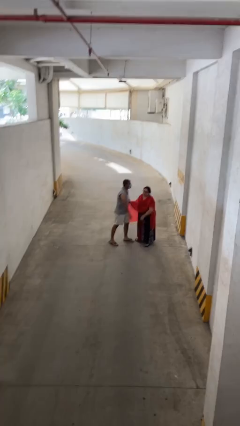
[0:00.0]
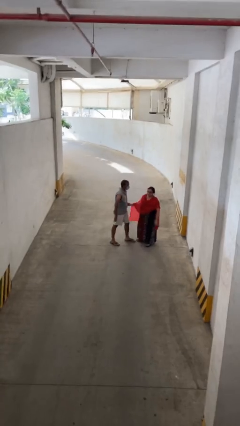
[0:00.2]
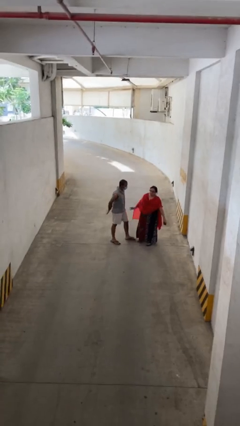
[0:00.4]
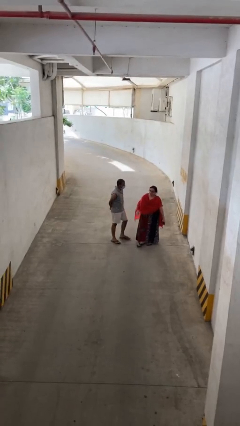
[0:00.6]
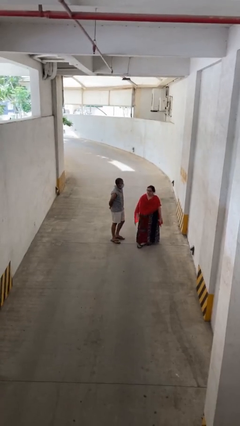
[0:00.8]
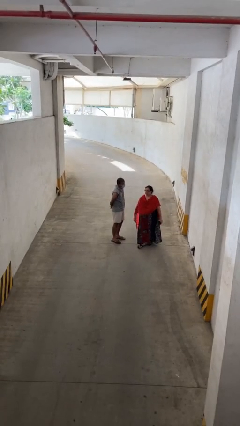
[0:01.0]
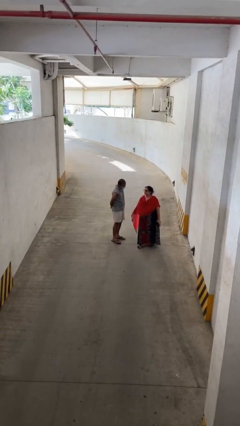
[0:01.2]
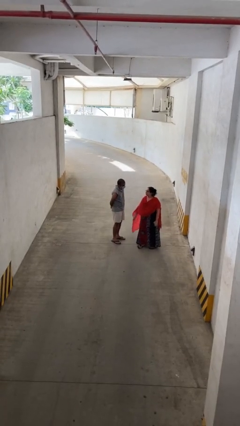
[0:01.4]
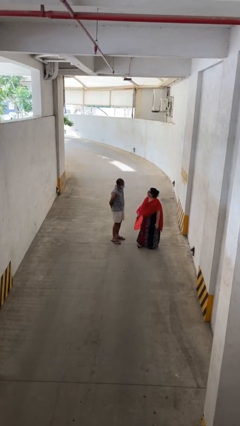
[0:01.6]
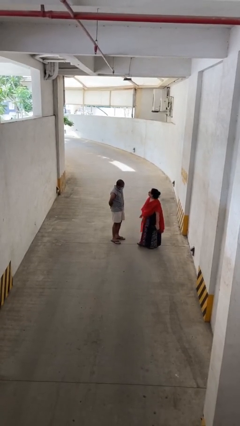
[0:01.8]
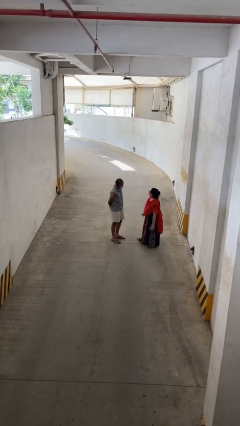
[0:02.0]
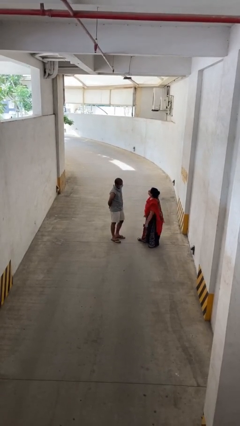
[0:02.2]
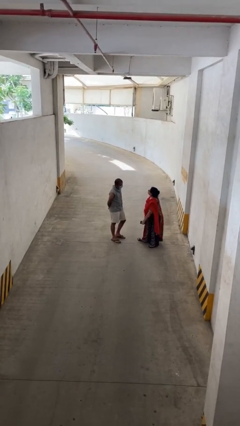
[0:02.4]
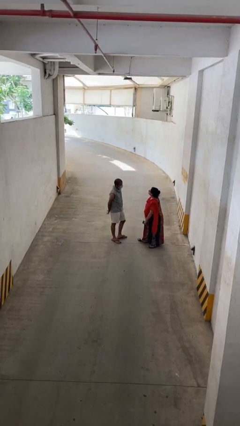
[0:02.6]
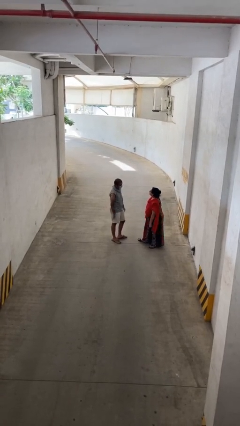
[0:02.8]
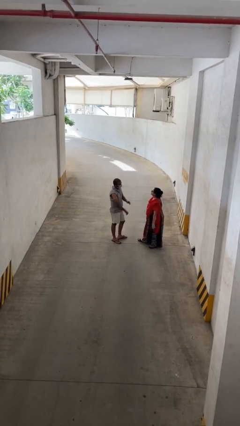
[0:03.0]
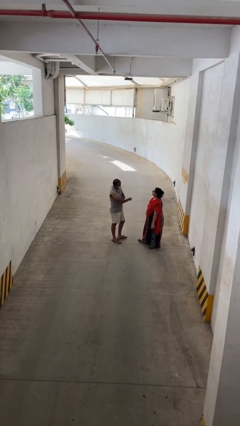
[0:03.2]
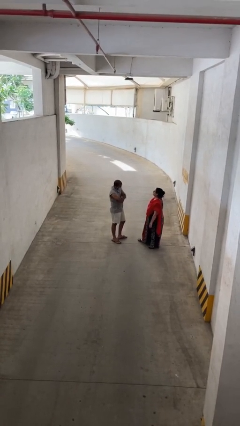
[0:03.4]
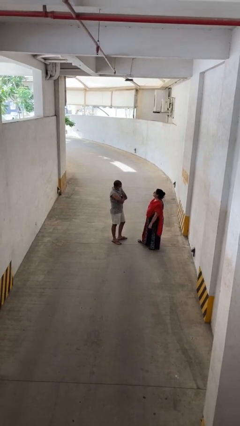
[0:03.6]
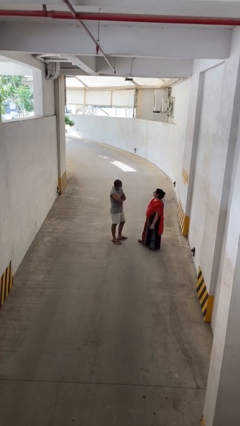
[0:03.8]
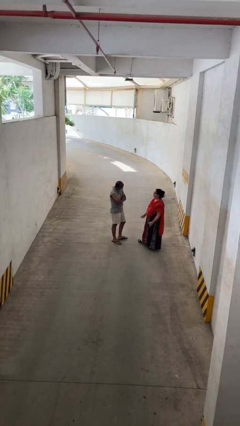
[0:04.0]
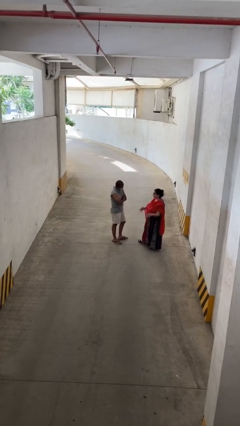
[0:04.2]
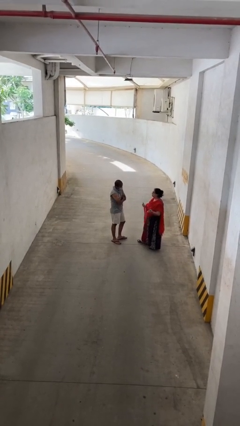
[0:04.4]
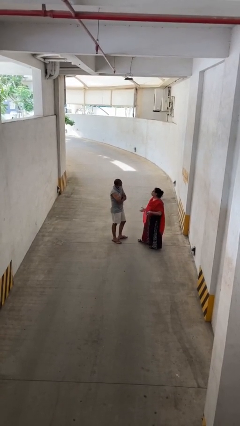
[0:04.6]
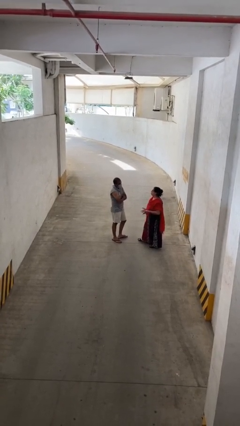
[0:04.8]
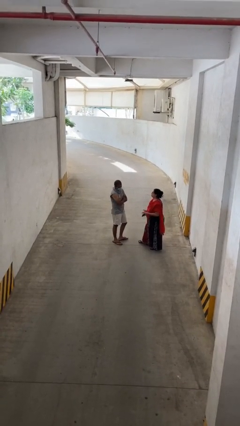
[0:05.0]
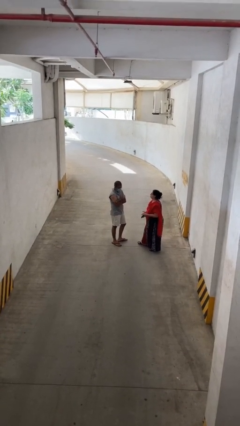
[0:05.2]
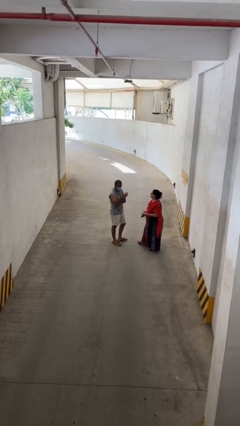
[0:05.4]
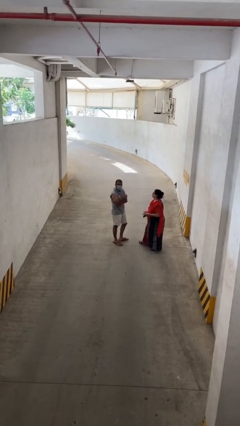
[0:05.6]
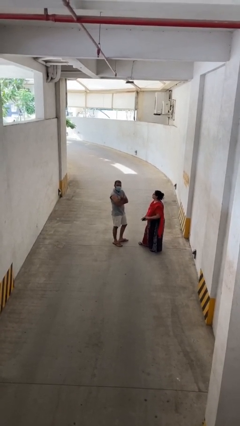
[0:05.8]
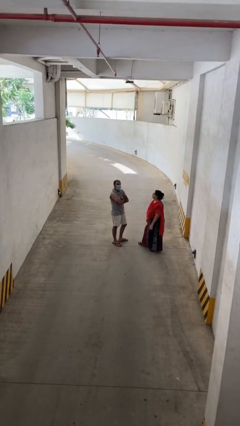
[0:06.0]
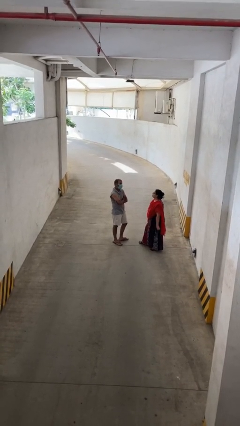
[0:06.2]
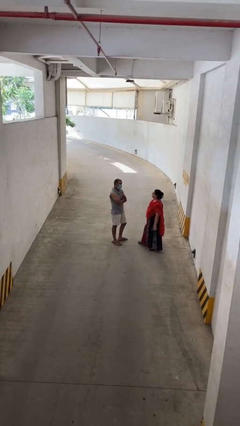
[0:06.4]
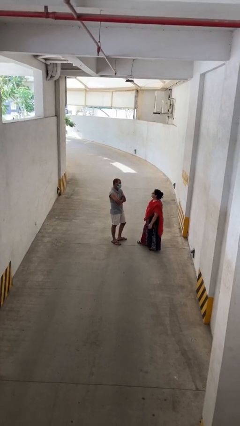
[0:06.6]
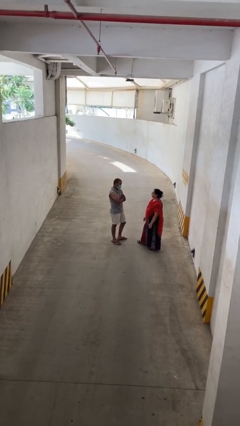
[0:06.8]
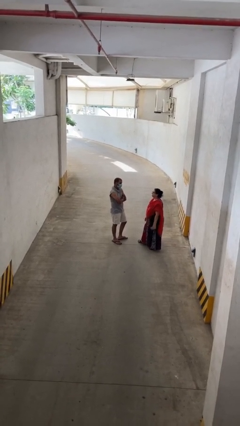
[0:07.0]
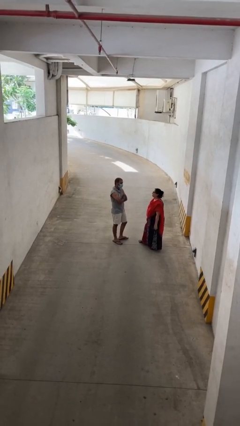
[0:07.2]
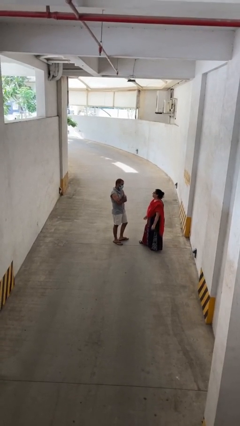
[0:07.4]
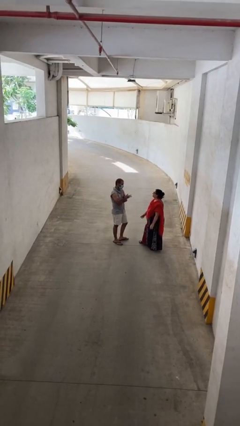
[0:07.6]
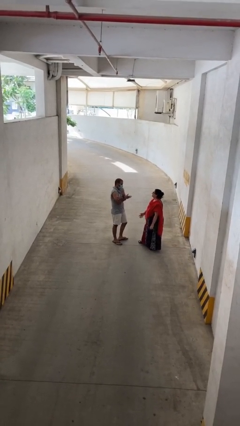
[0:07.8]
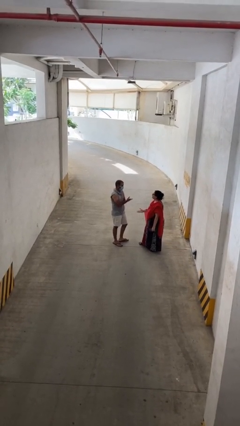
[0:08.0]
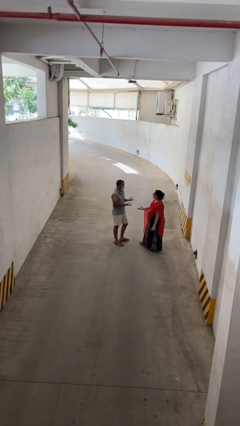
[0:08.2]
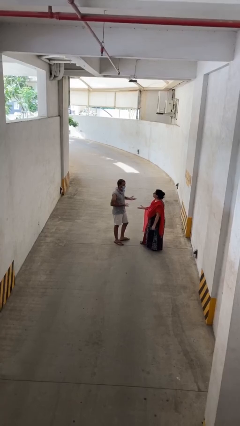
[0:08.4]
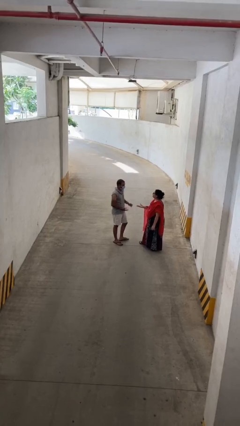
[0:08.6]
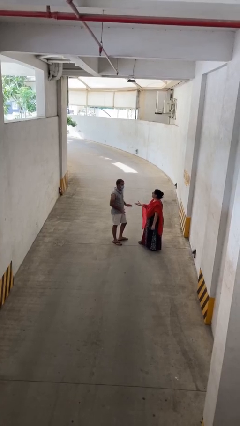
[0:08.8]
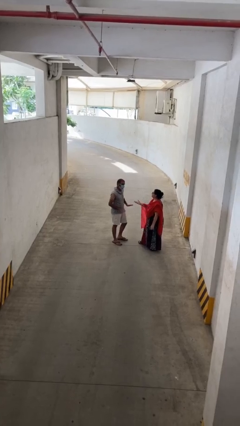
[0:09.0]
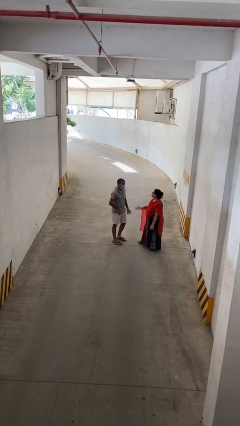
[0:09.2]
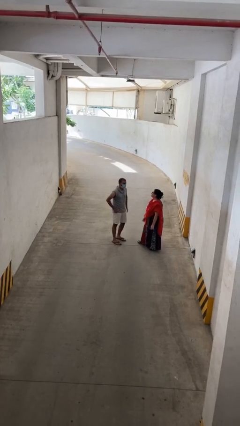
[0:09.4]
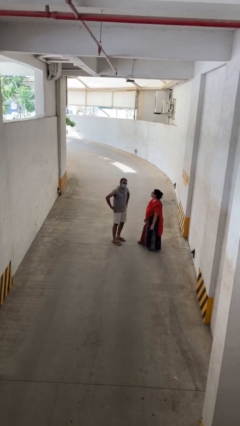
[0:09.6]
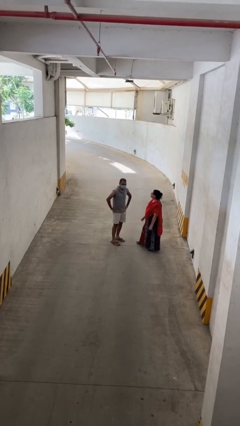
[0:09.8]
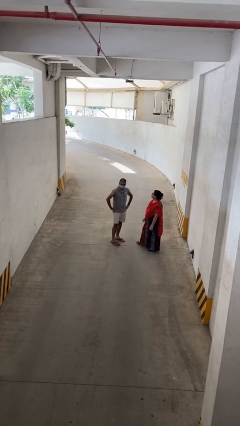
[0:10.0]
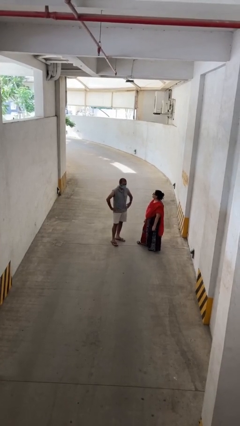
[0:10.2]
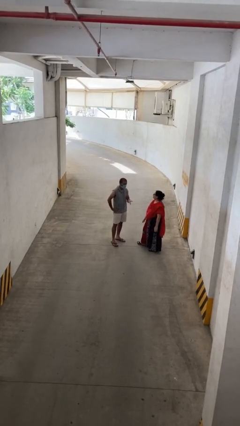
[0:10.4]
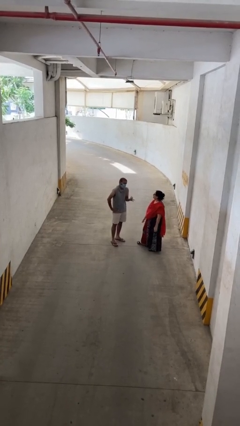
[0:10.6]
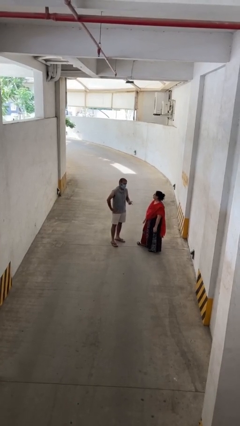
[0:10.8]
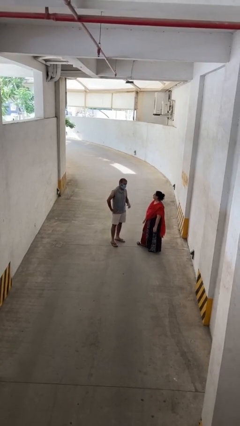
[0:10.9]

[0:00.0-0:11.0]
person talks to person

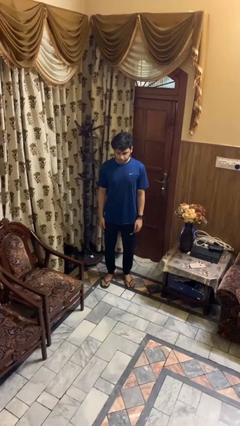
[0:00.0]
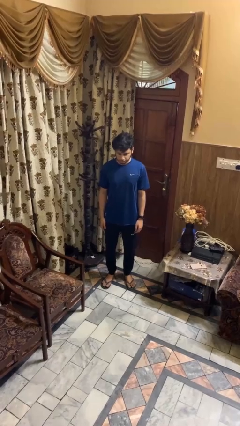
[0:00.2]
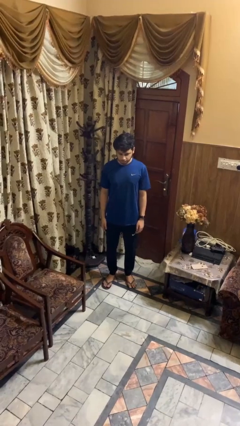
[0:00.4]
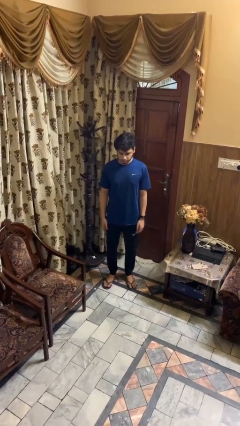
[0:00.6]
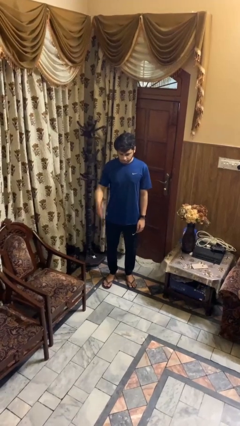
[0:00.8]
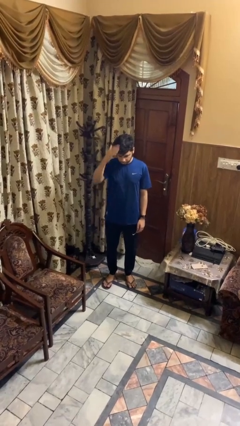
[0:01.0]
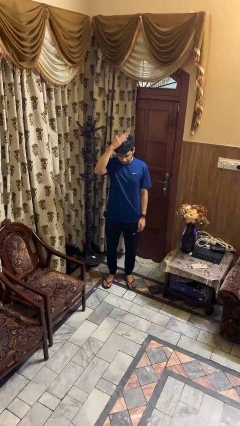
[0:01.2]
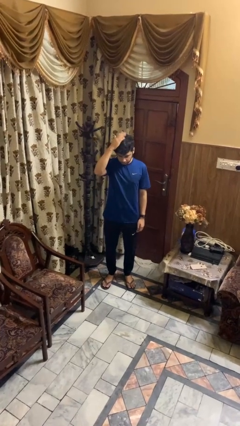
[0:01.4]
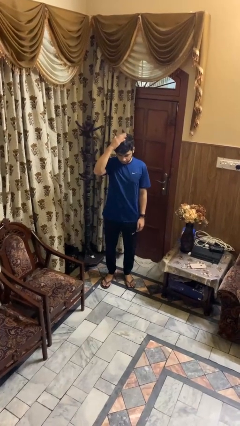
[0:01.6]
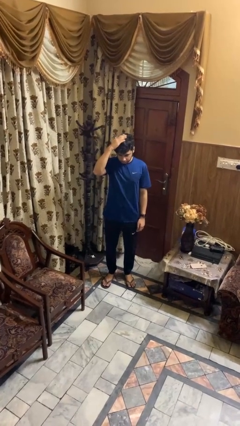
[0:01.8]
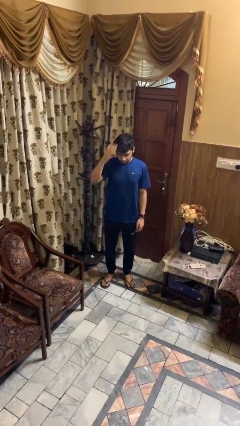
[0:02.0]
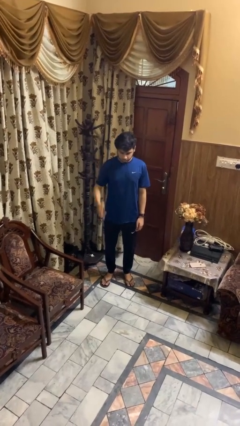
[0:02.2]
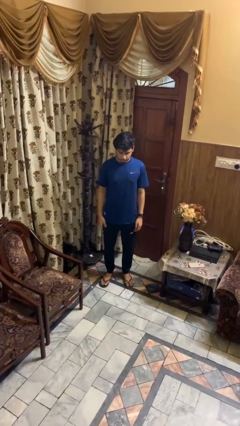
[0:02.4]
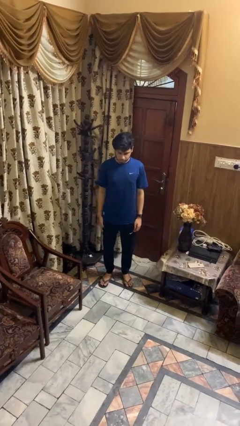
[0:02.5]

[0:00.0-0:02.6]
person pats head

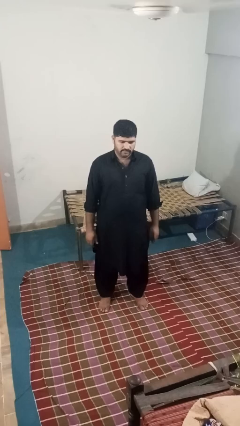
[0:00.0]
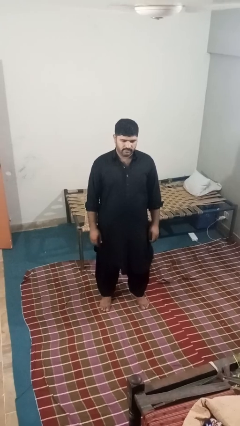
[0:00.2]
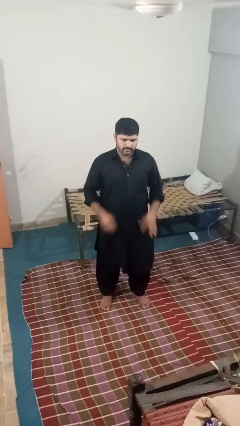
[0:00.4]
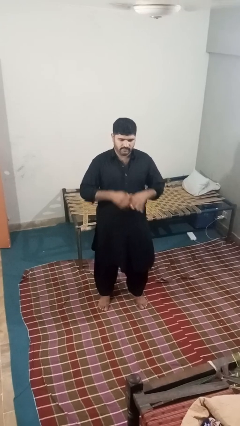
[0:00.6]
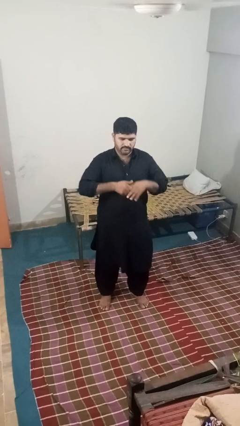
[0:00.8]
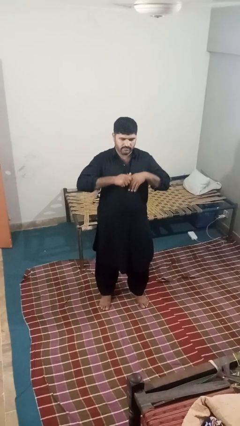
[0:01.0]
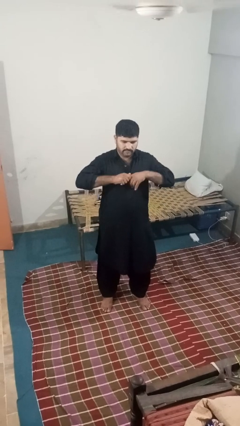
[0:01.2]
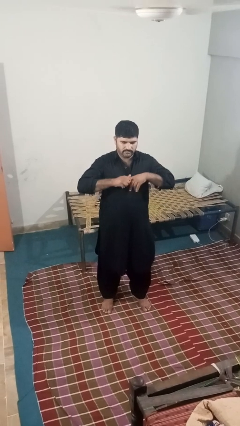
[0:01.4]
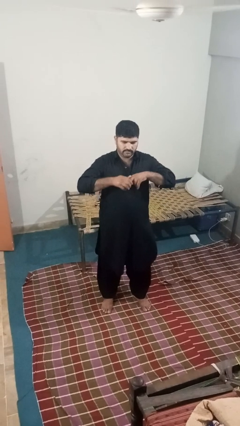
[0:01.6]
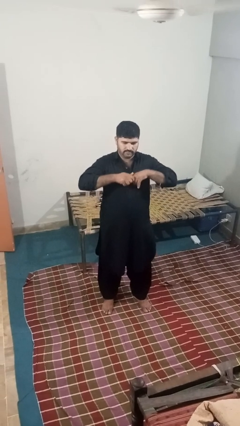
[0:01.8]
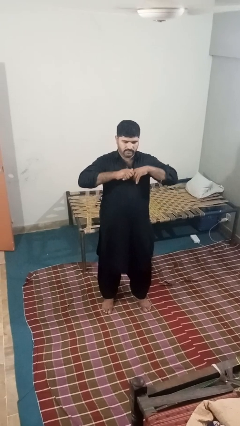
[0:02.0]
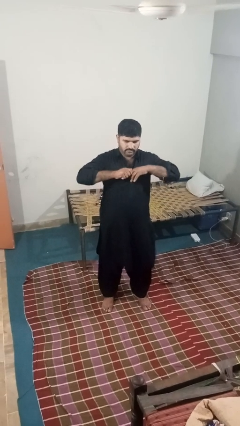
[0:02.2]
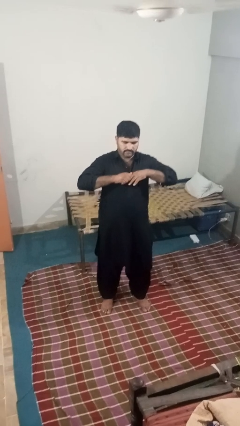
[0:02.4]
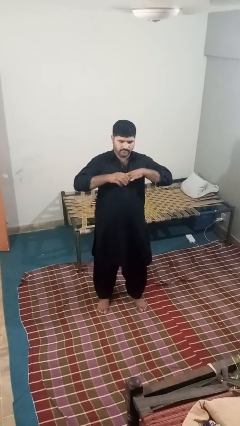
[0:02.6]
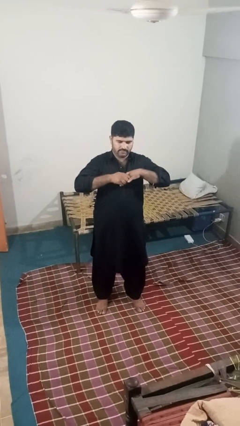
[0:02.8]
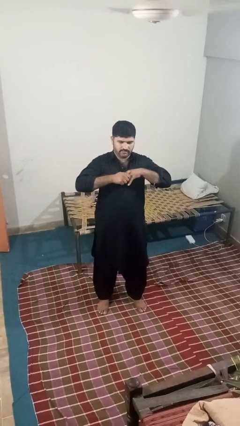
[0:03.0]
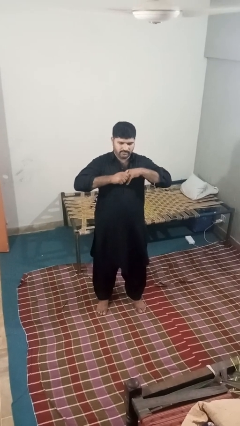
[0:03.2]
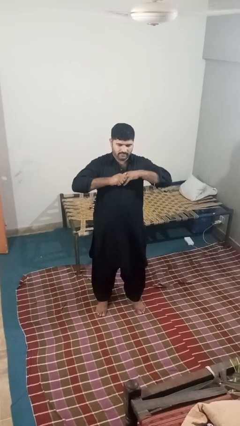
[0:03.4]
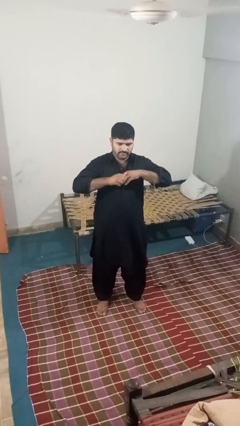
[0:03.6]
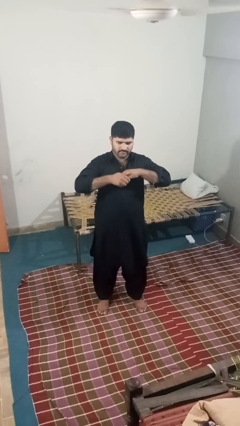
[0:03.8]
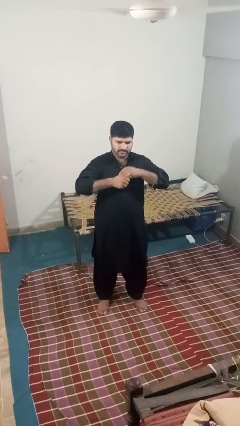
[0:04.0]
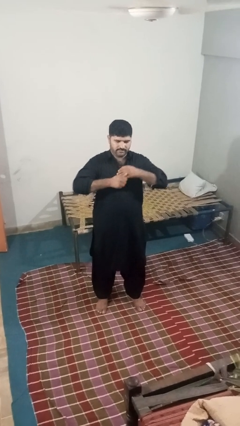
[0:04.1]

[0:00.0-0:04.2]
person cracks knuckles

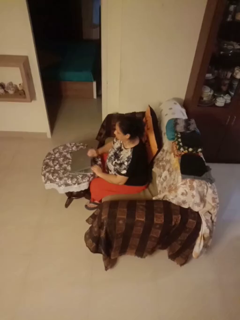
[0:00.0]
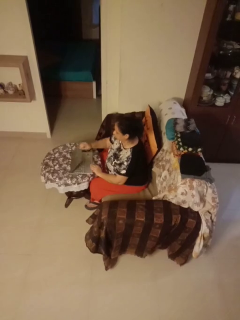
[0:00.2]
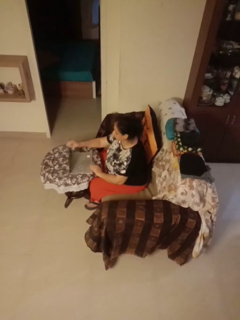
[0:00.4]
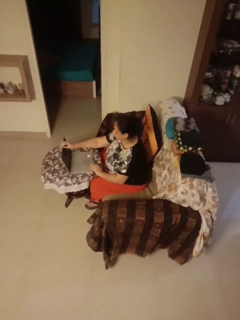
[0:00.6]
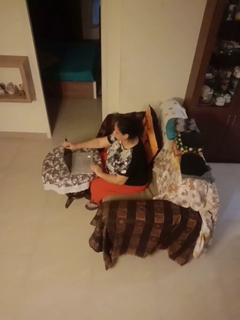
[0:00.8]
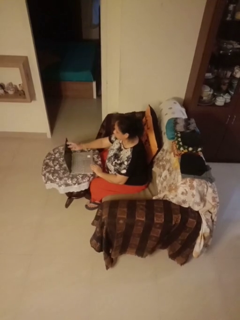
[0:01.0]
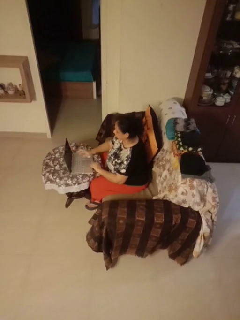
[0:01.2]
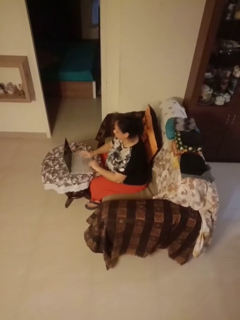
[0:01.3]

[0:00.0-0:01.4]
person opens laptop
